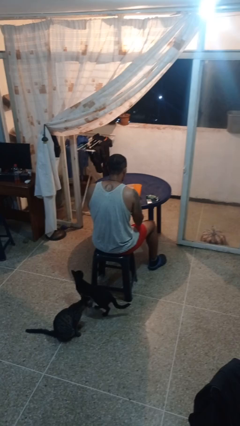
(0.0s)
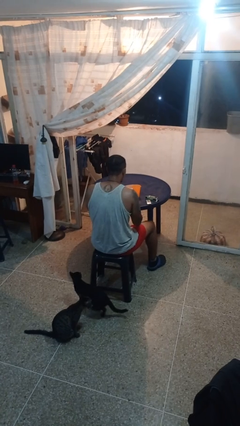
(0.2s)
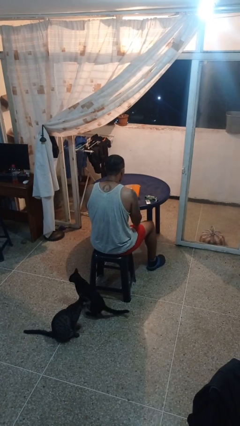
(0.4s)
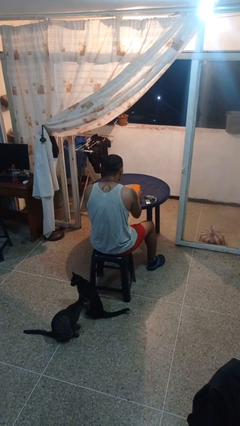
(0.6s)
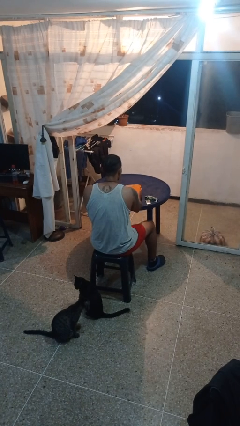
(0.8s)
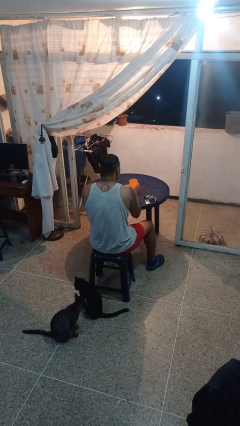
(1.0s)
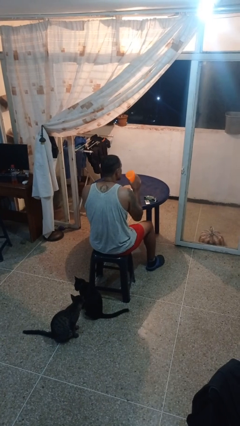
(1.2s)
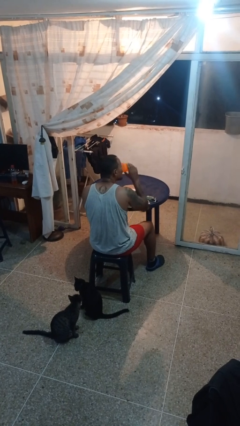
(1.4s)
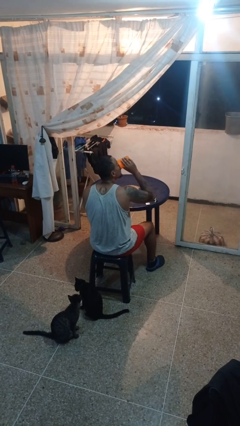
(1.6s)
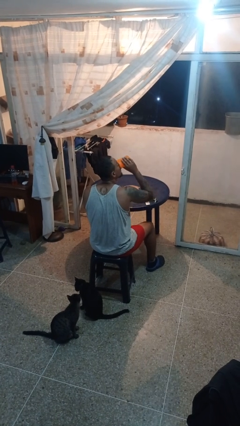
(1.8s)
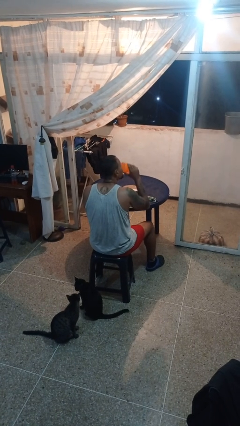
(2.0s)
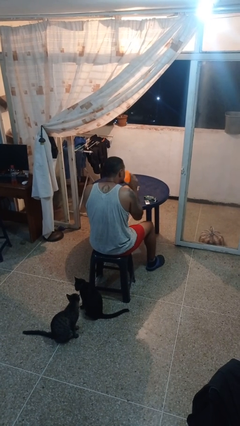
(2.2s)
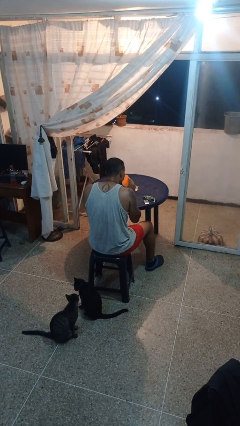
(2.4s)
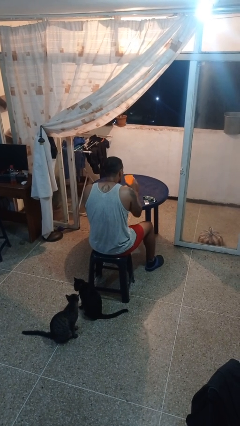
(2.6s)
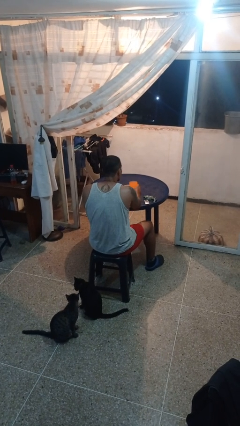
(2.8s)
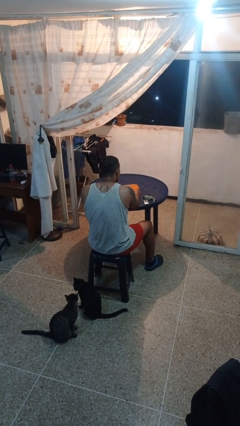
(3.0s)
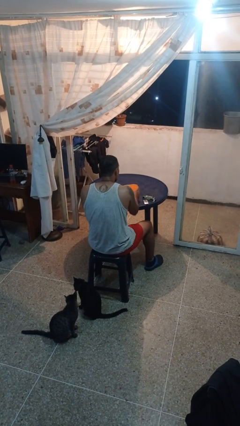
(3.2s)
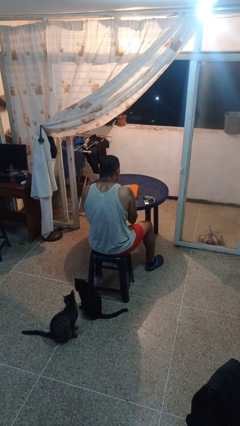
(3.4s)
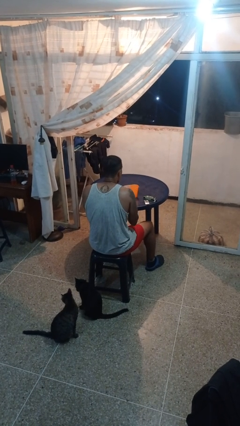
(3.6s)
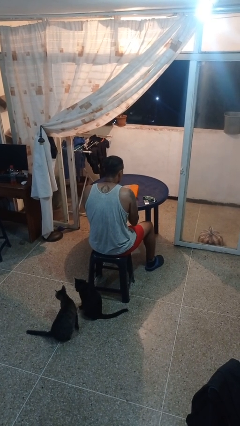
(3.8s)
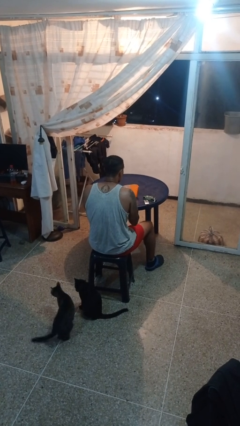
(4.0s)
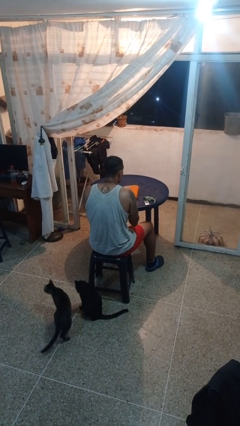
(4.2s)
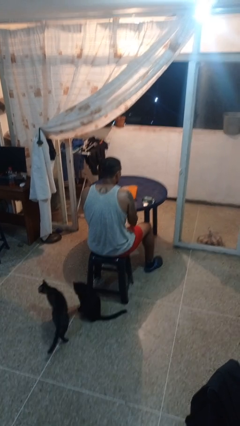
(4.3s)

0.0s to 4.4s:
person drinks from cup

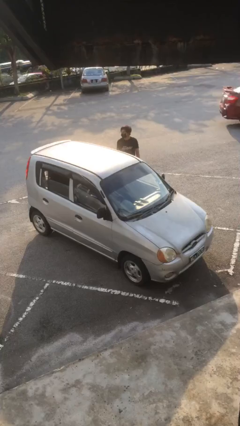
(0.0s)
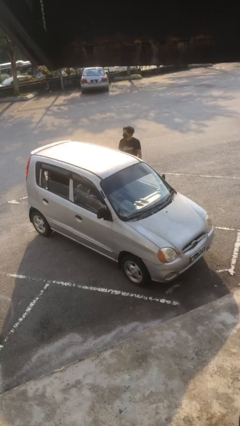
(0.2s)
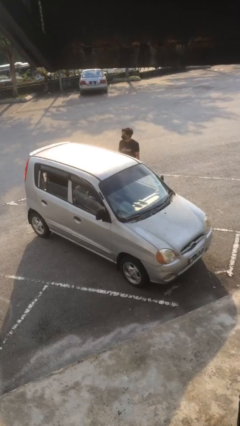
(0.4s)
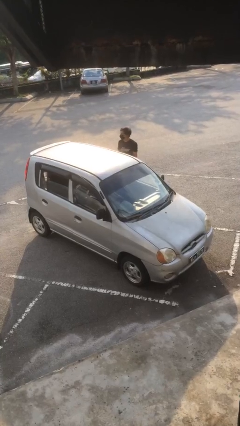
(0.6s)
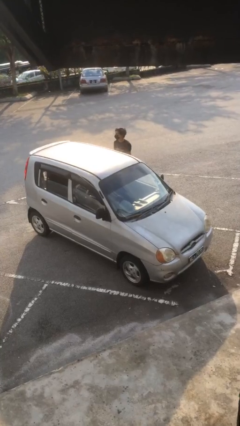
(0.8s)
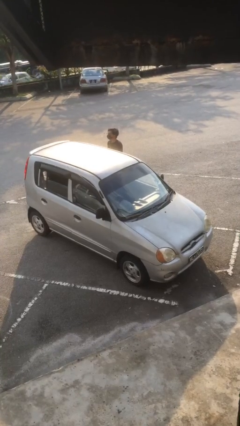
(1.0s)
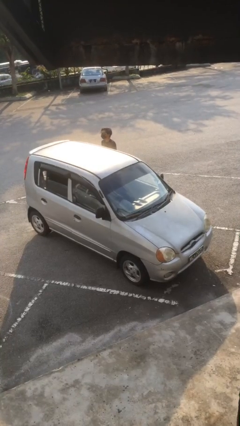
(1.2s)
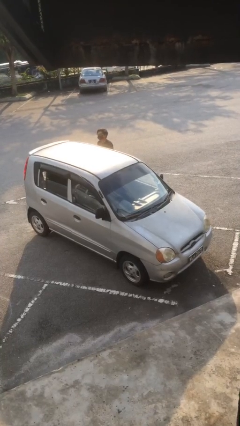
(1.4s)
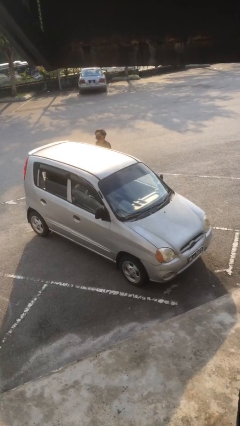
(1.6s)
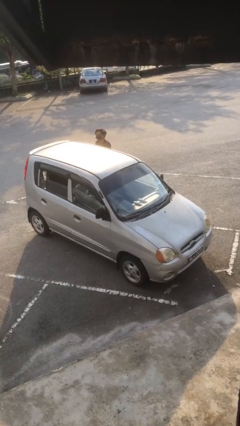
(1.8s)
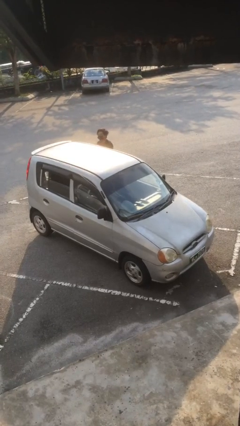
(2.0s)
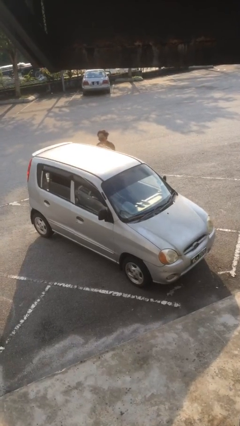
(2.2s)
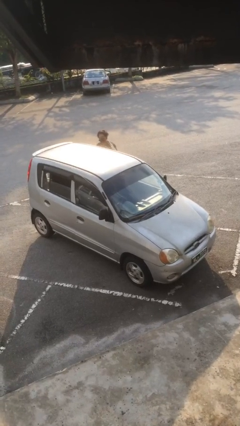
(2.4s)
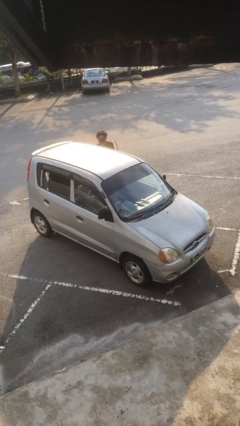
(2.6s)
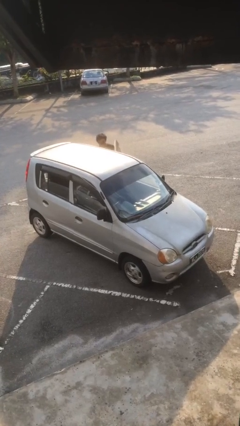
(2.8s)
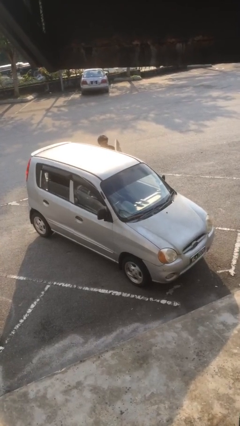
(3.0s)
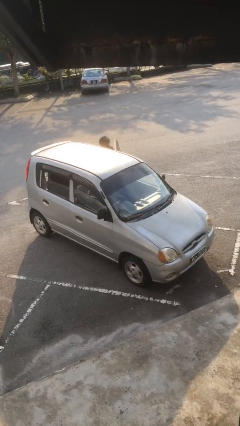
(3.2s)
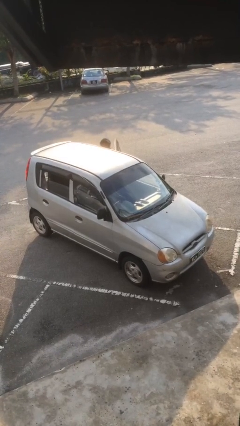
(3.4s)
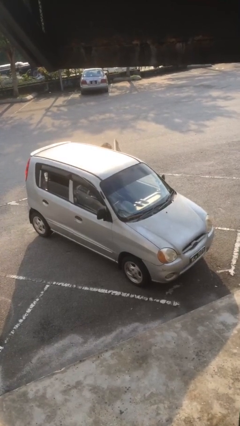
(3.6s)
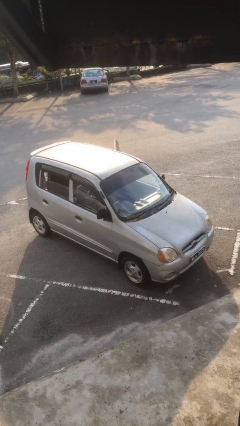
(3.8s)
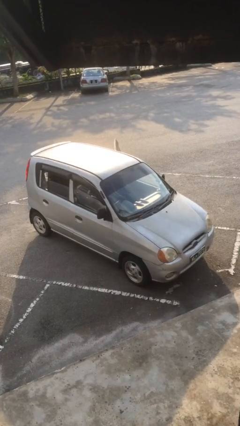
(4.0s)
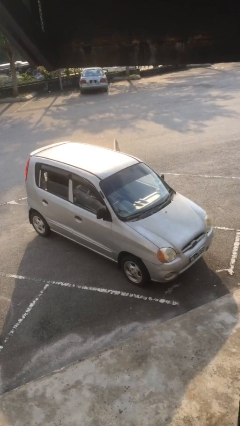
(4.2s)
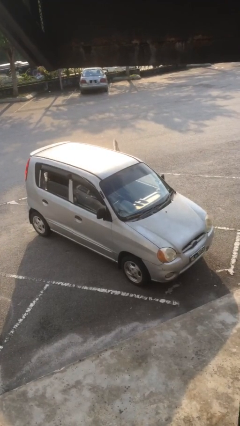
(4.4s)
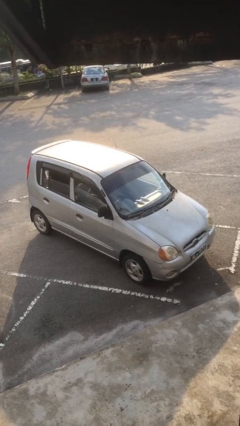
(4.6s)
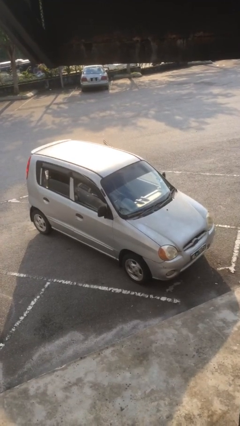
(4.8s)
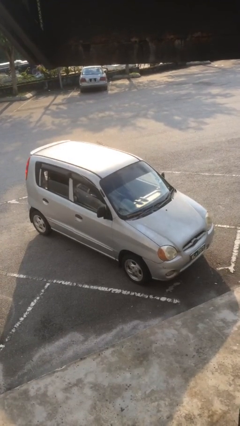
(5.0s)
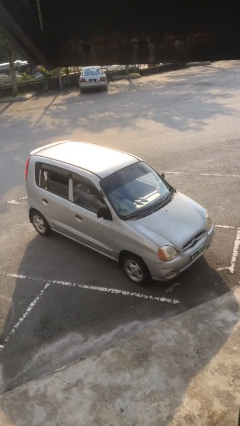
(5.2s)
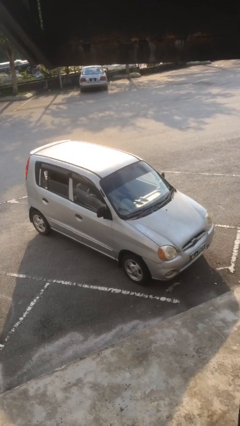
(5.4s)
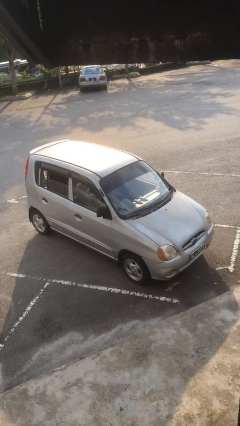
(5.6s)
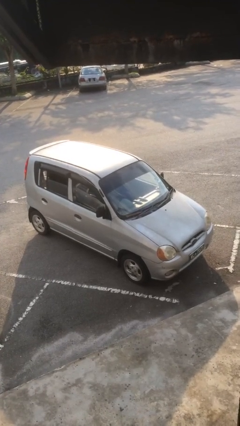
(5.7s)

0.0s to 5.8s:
car picks up person

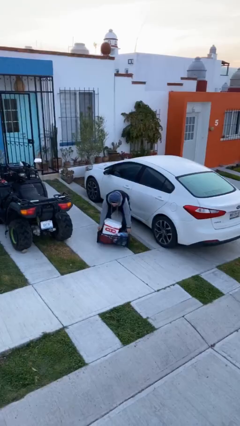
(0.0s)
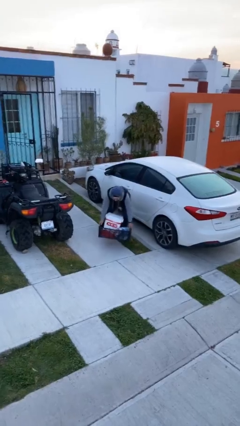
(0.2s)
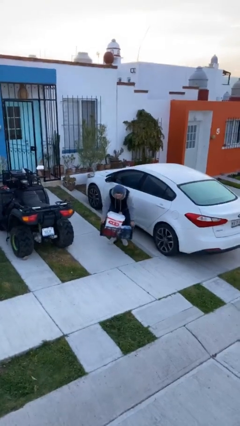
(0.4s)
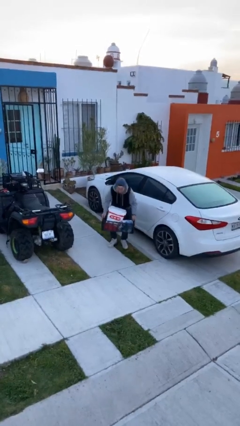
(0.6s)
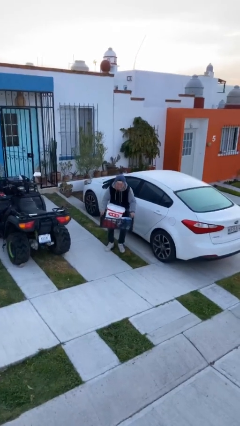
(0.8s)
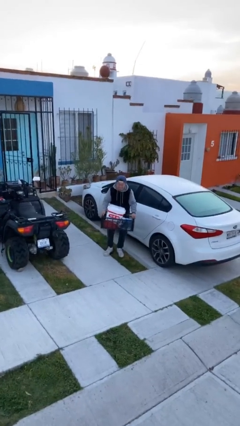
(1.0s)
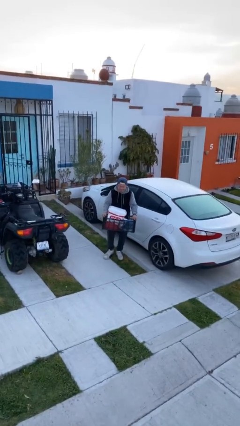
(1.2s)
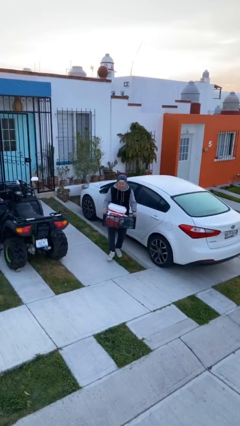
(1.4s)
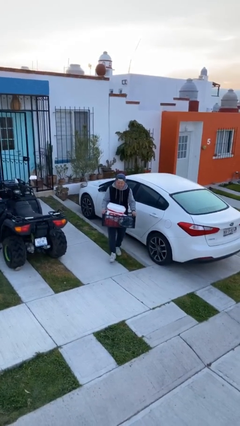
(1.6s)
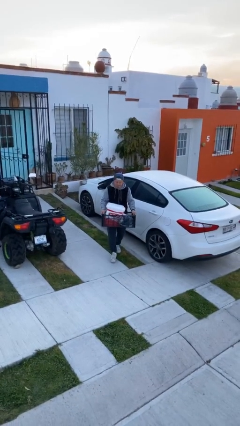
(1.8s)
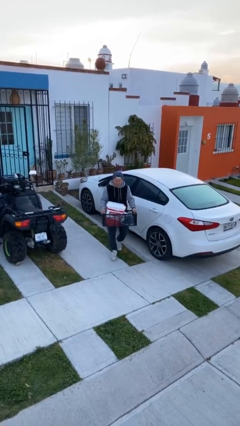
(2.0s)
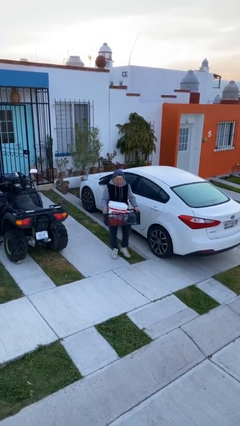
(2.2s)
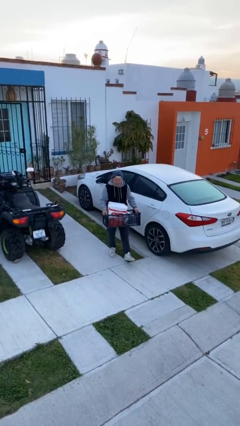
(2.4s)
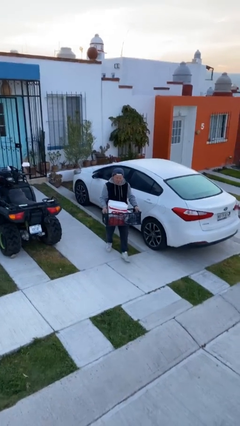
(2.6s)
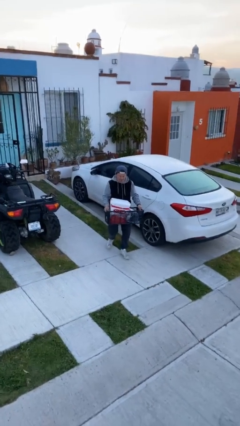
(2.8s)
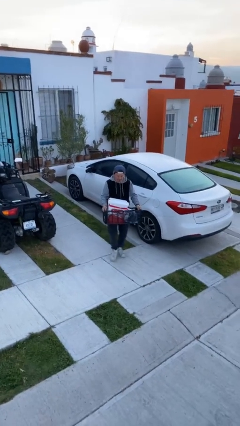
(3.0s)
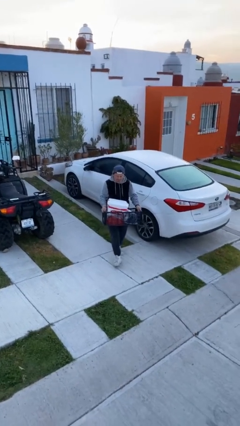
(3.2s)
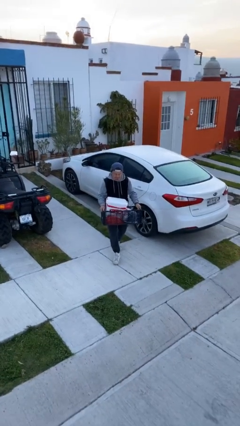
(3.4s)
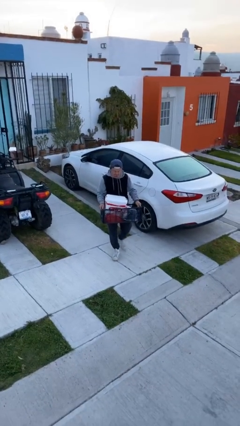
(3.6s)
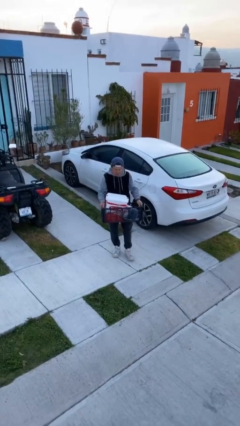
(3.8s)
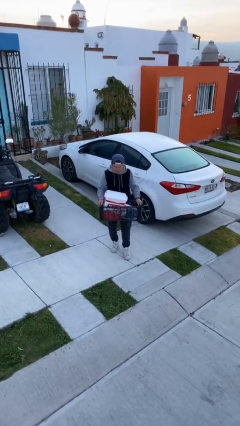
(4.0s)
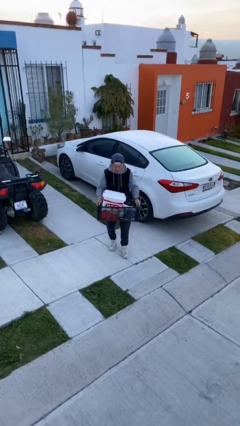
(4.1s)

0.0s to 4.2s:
person carries heavy object

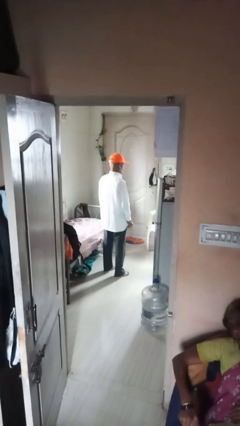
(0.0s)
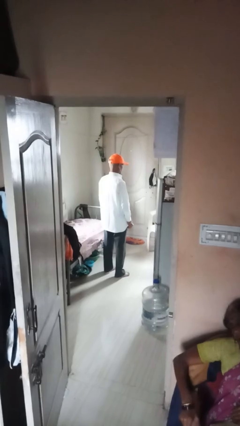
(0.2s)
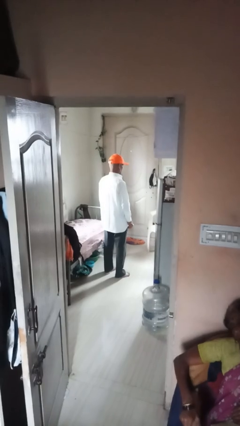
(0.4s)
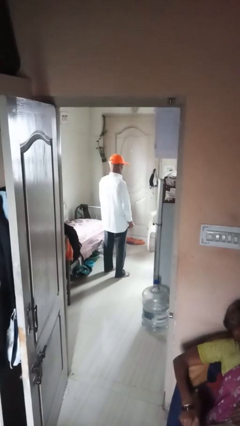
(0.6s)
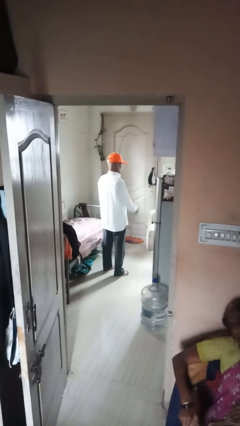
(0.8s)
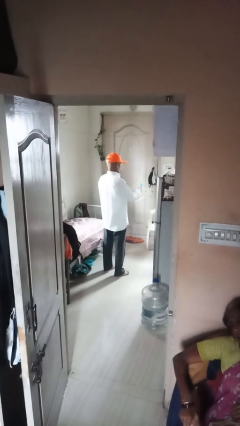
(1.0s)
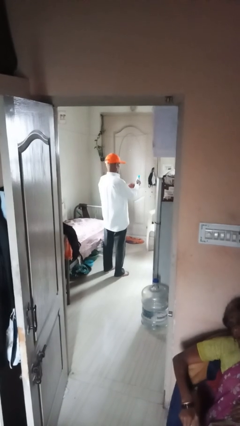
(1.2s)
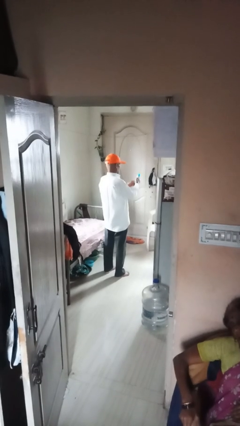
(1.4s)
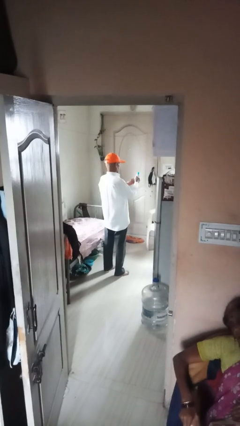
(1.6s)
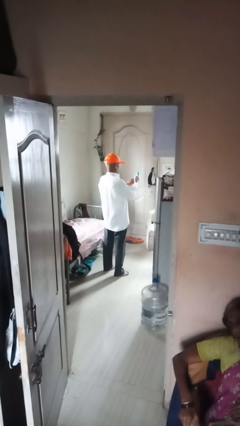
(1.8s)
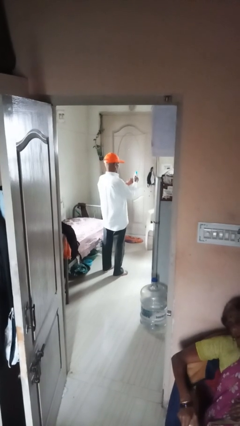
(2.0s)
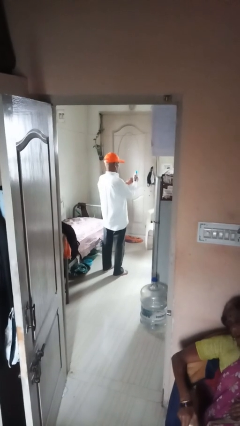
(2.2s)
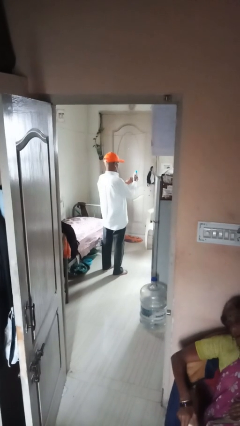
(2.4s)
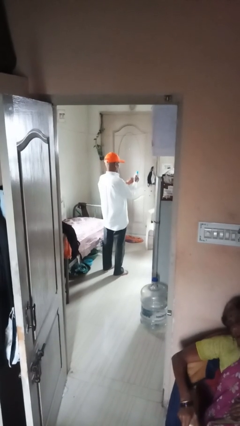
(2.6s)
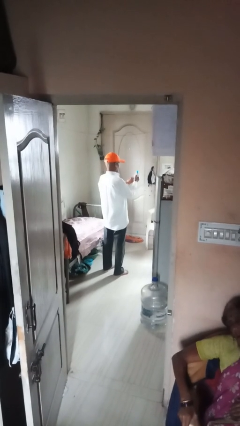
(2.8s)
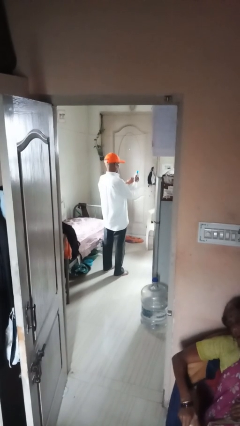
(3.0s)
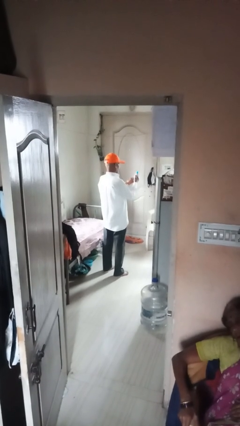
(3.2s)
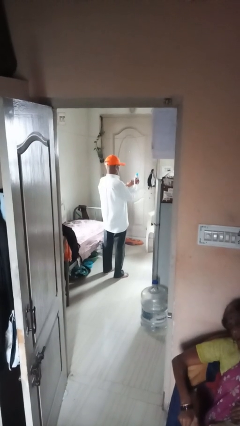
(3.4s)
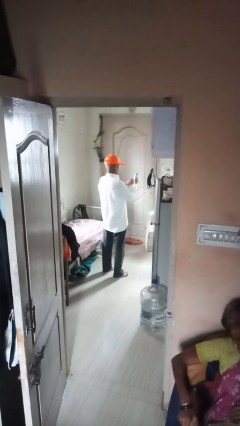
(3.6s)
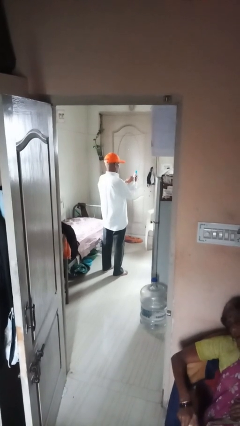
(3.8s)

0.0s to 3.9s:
person squeezes object
